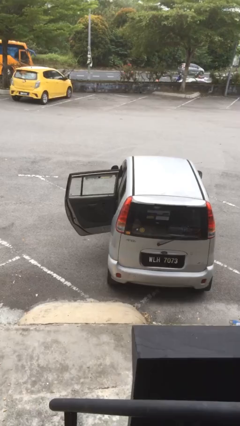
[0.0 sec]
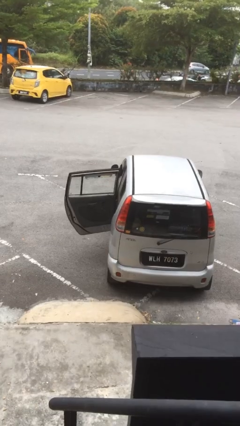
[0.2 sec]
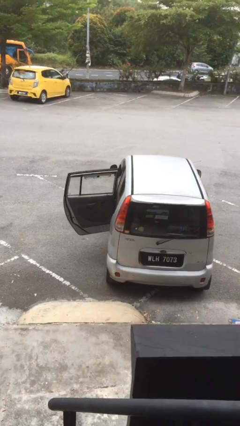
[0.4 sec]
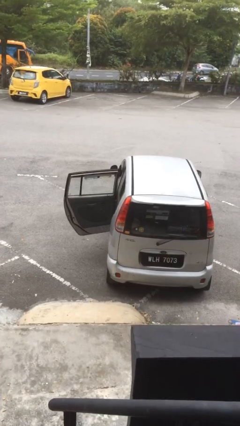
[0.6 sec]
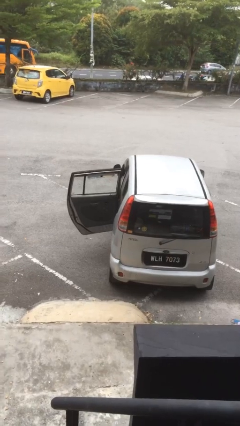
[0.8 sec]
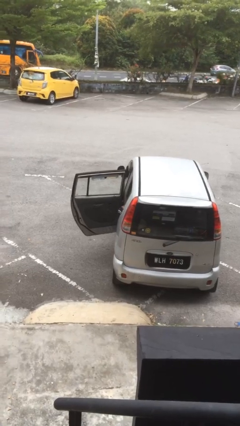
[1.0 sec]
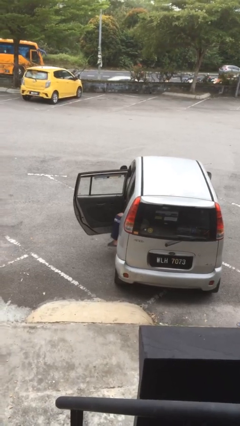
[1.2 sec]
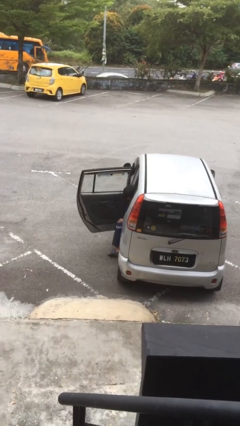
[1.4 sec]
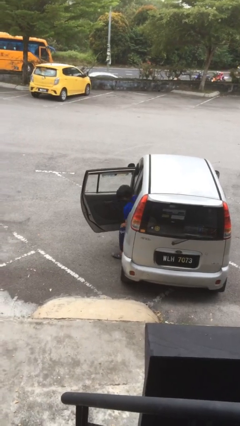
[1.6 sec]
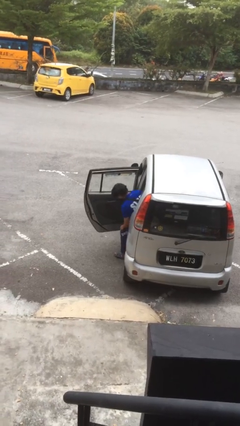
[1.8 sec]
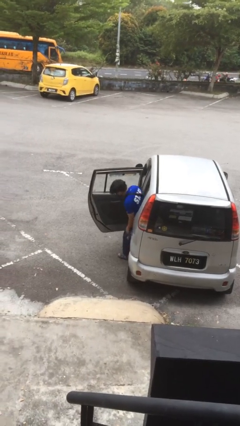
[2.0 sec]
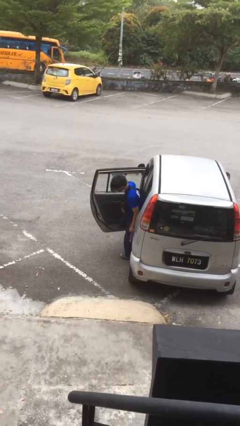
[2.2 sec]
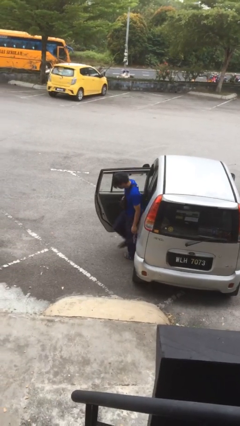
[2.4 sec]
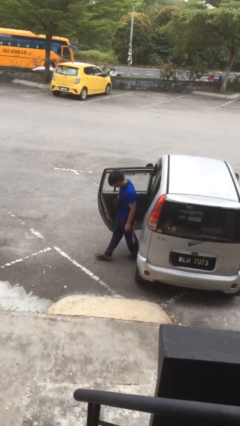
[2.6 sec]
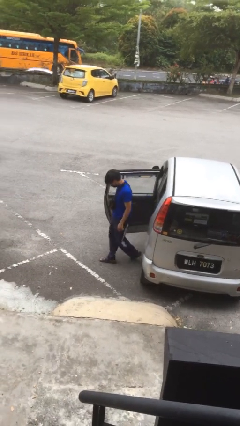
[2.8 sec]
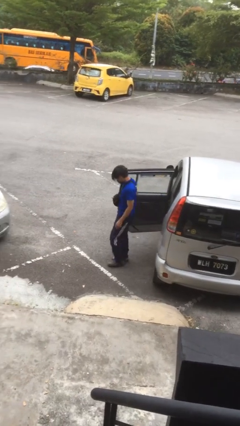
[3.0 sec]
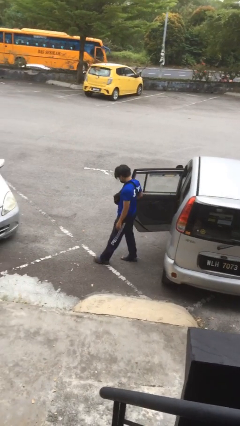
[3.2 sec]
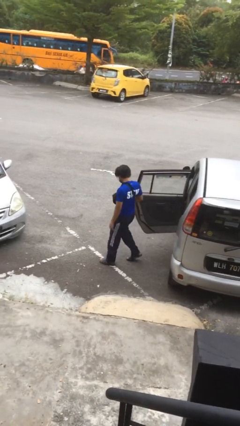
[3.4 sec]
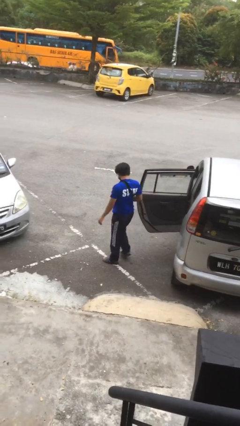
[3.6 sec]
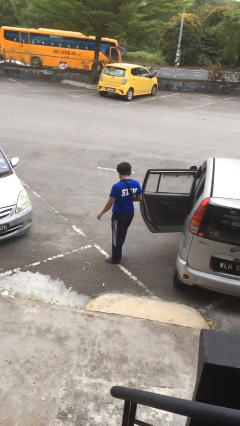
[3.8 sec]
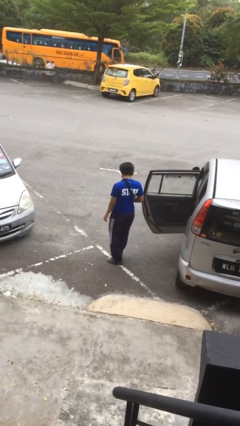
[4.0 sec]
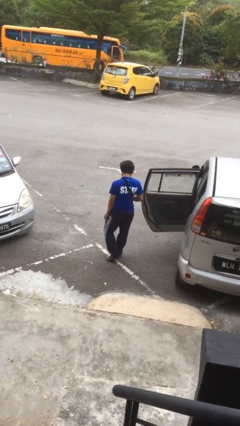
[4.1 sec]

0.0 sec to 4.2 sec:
person exits car

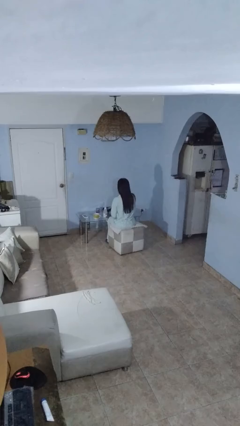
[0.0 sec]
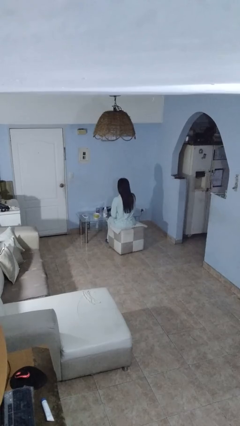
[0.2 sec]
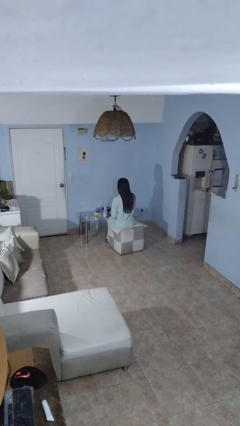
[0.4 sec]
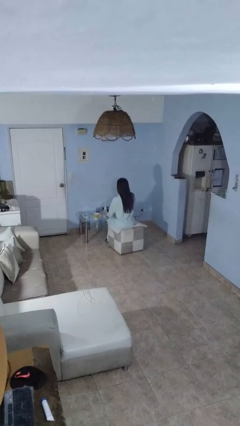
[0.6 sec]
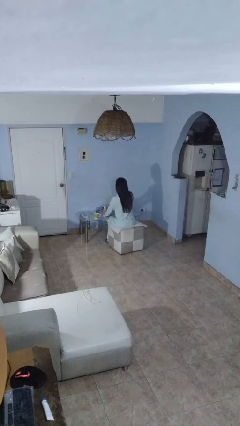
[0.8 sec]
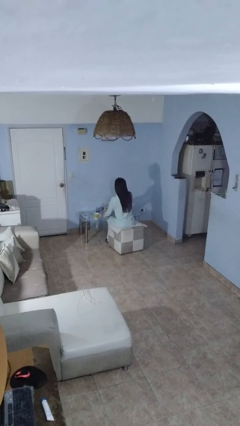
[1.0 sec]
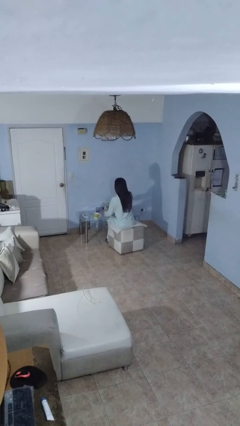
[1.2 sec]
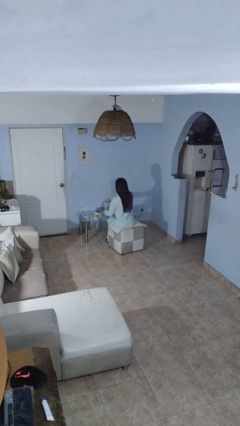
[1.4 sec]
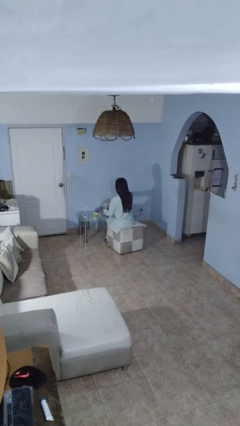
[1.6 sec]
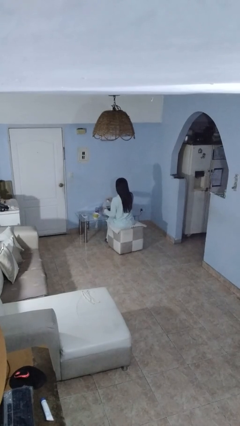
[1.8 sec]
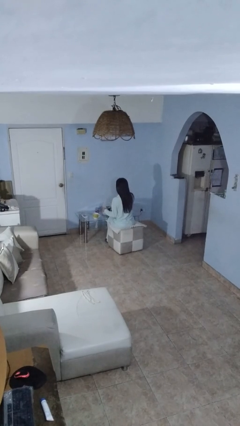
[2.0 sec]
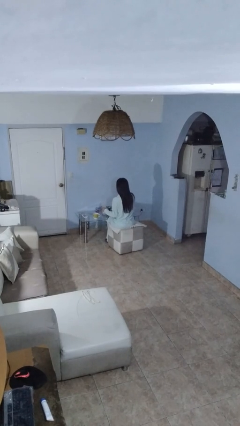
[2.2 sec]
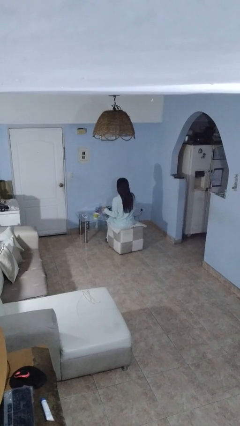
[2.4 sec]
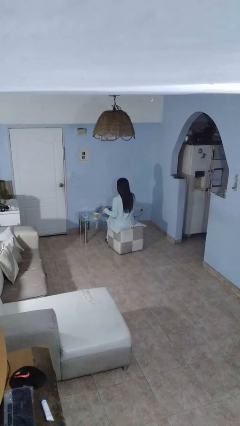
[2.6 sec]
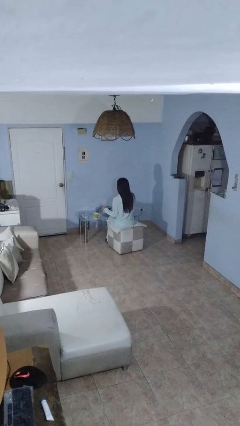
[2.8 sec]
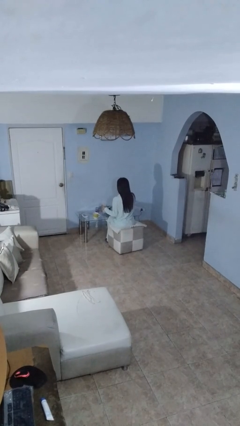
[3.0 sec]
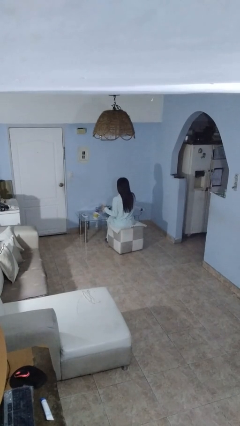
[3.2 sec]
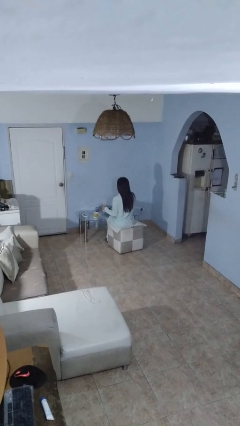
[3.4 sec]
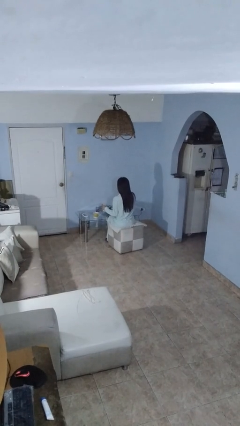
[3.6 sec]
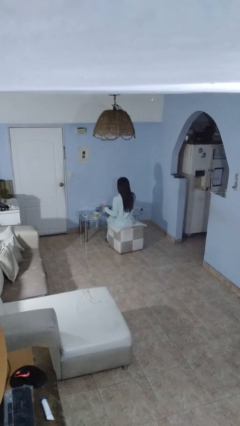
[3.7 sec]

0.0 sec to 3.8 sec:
person unscrews lid from bottle

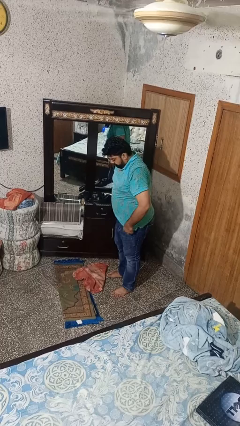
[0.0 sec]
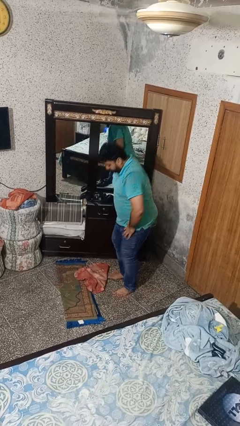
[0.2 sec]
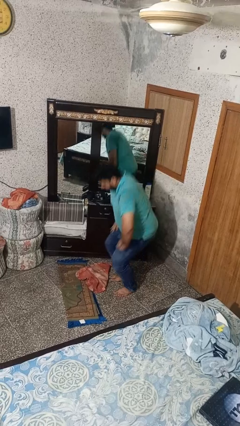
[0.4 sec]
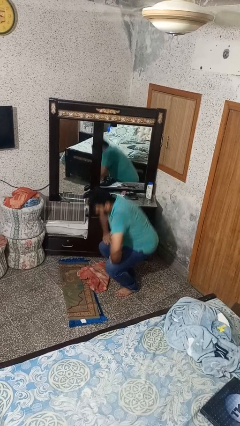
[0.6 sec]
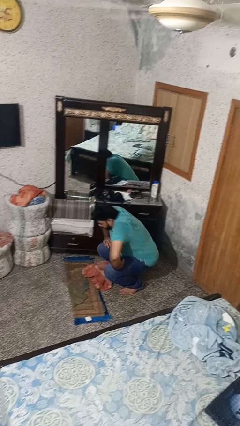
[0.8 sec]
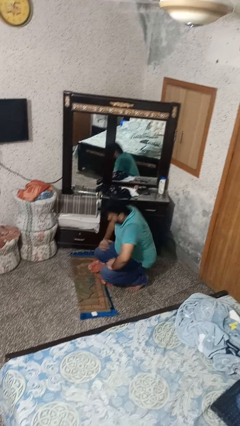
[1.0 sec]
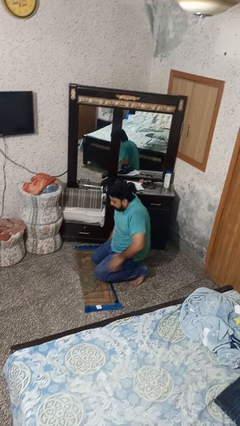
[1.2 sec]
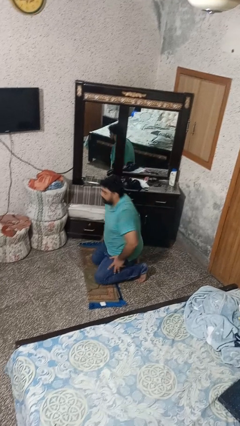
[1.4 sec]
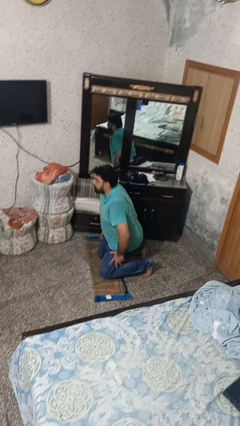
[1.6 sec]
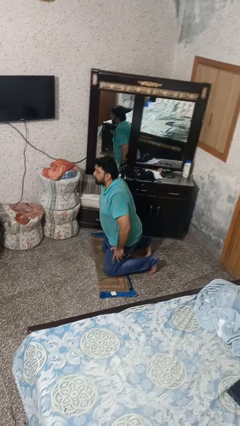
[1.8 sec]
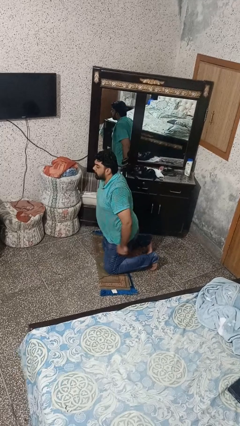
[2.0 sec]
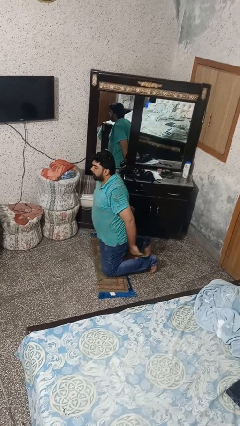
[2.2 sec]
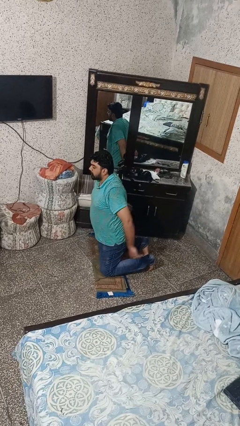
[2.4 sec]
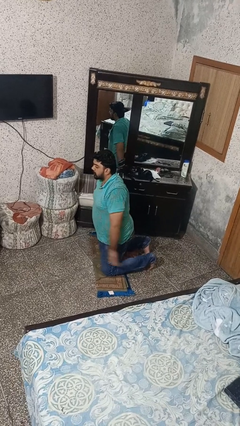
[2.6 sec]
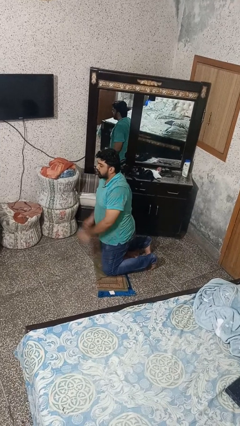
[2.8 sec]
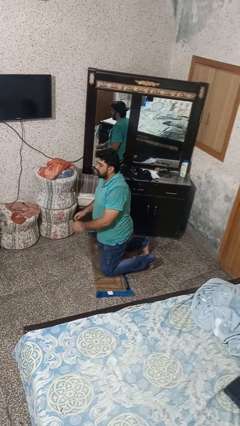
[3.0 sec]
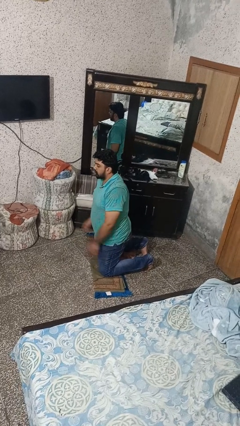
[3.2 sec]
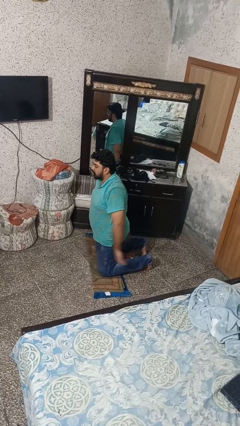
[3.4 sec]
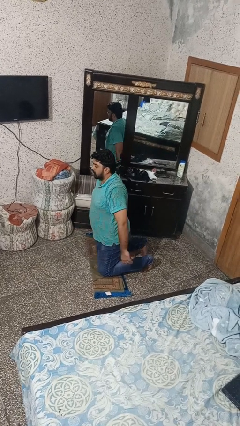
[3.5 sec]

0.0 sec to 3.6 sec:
person kneels

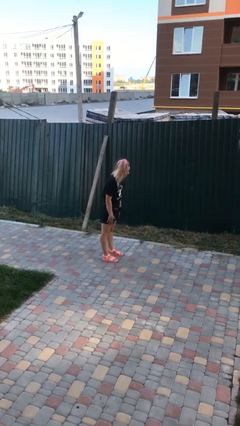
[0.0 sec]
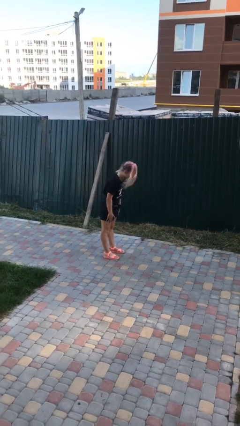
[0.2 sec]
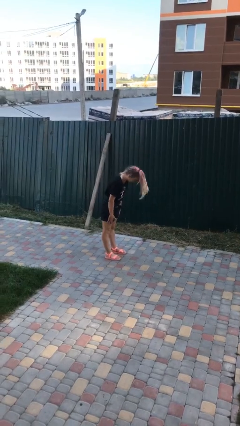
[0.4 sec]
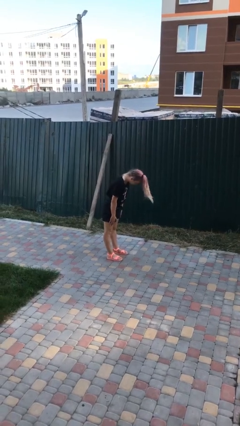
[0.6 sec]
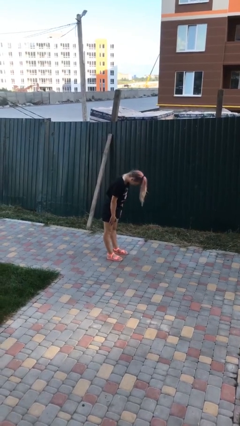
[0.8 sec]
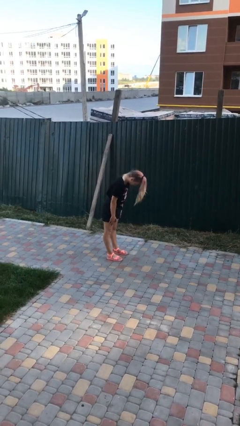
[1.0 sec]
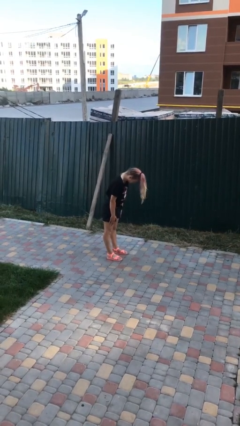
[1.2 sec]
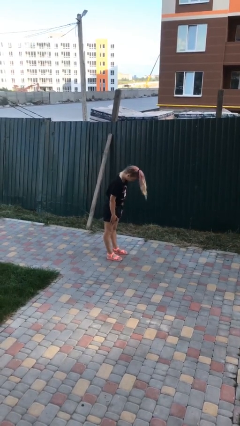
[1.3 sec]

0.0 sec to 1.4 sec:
person bows

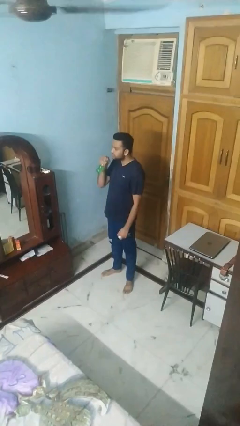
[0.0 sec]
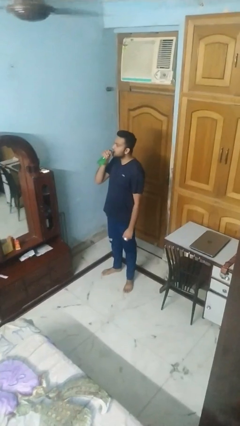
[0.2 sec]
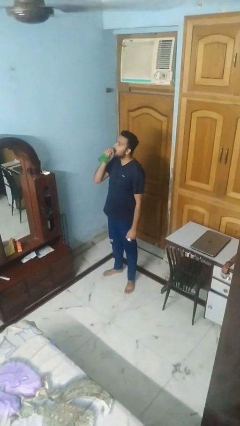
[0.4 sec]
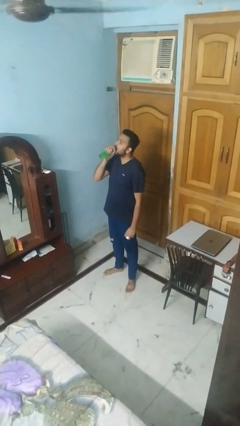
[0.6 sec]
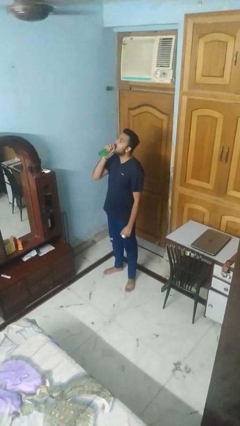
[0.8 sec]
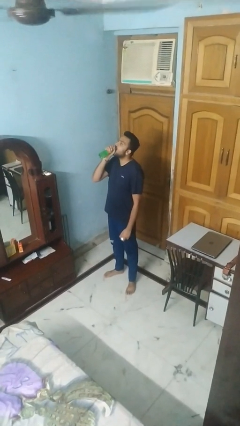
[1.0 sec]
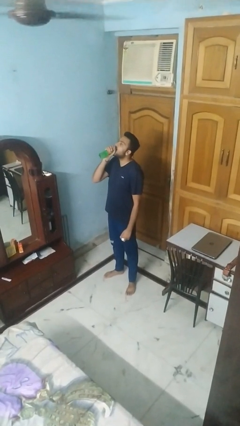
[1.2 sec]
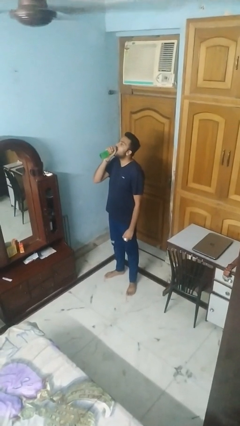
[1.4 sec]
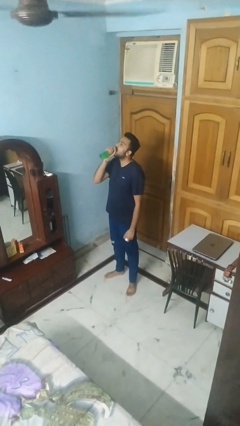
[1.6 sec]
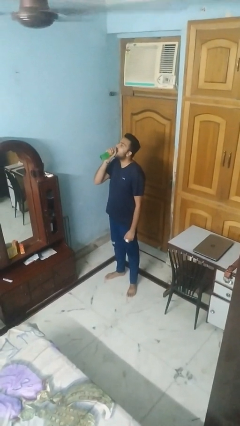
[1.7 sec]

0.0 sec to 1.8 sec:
person drinks from bottle

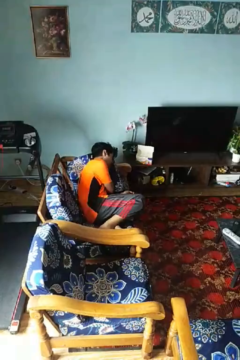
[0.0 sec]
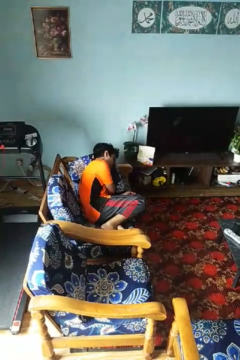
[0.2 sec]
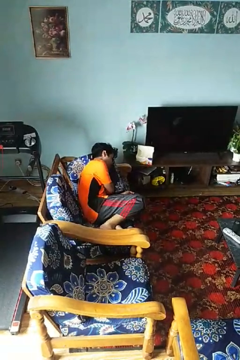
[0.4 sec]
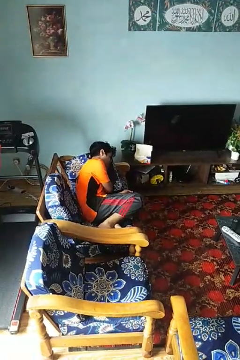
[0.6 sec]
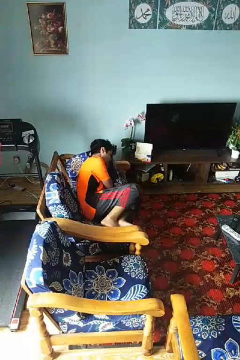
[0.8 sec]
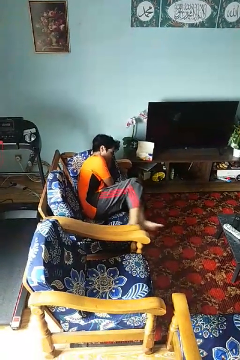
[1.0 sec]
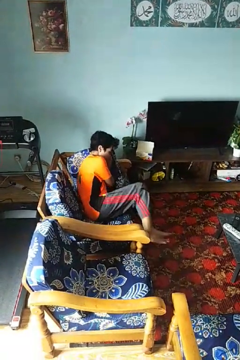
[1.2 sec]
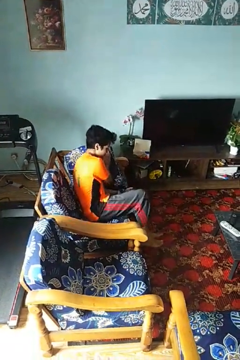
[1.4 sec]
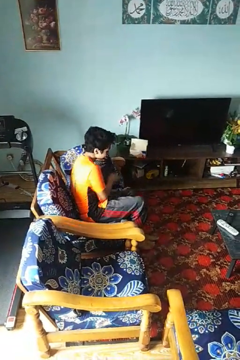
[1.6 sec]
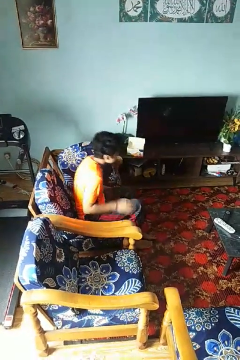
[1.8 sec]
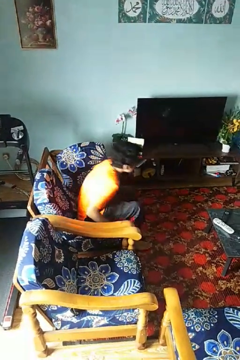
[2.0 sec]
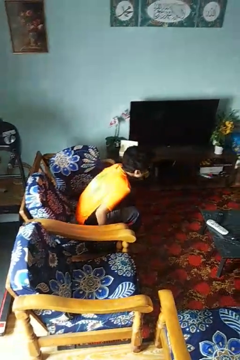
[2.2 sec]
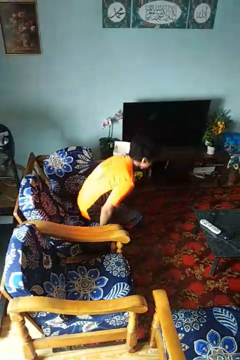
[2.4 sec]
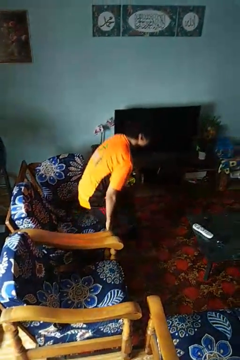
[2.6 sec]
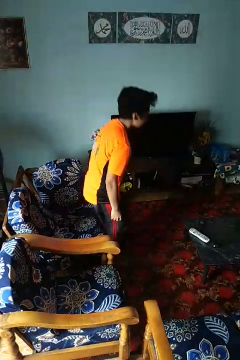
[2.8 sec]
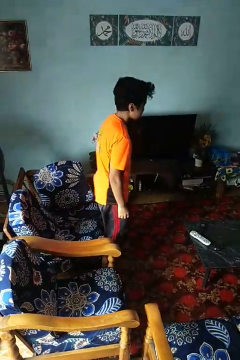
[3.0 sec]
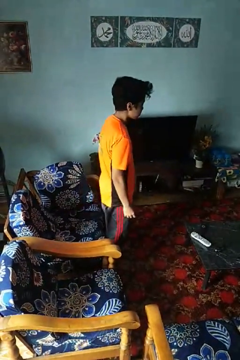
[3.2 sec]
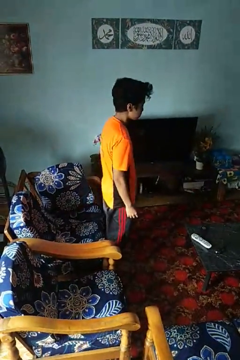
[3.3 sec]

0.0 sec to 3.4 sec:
person stands up
